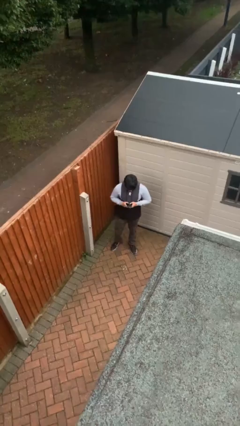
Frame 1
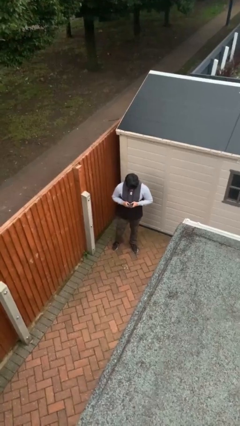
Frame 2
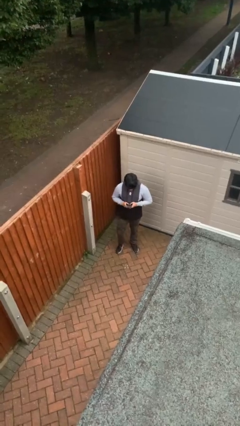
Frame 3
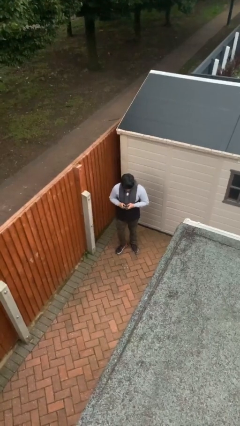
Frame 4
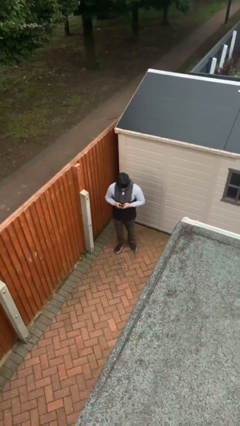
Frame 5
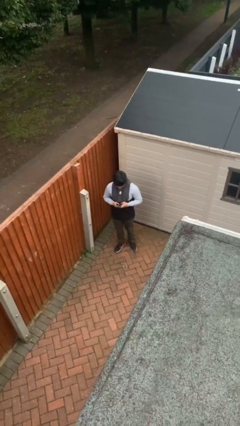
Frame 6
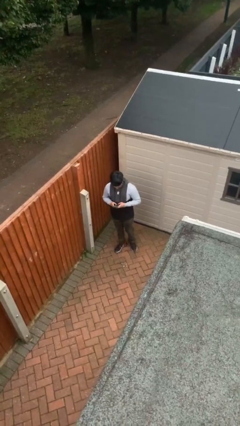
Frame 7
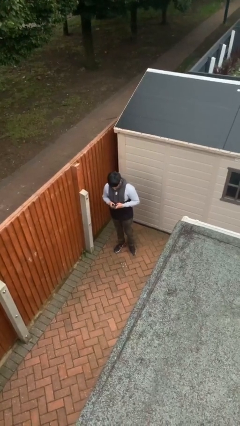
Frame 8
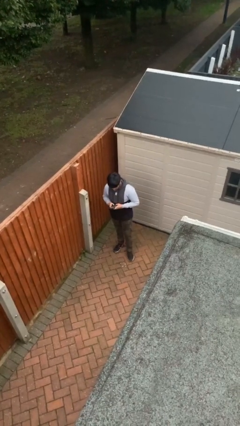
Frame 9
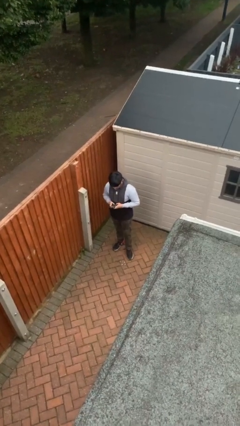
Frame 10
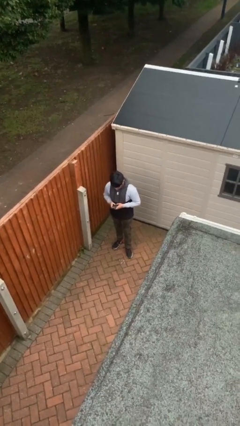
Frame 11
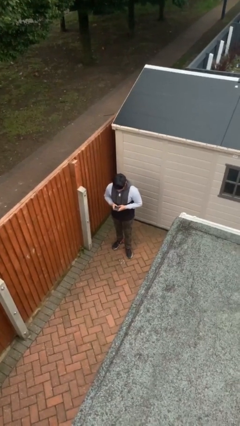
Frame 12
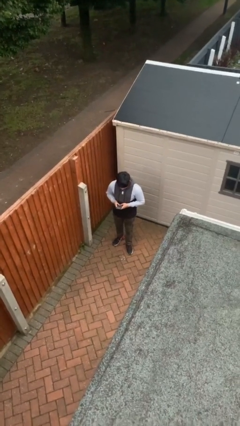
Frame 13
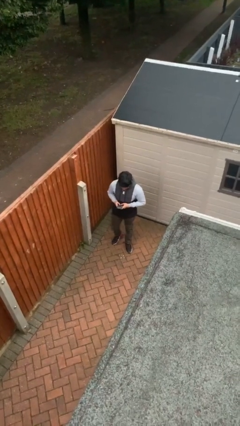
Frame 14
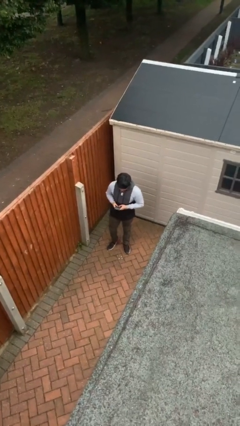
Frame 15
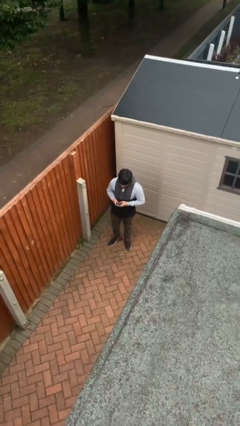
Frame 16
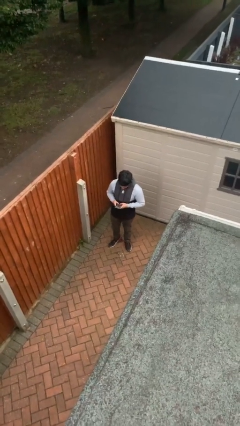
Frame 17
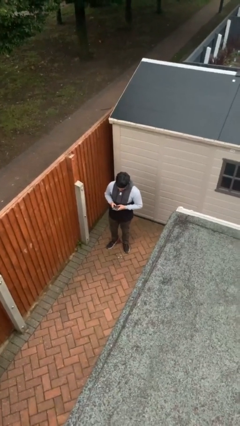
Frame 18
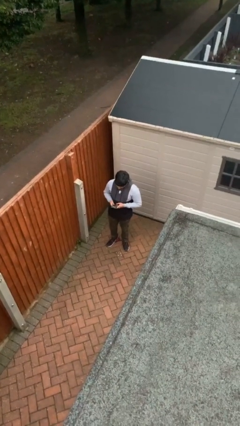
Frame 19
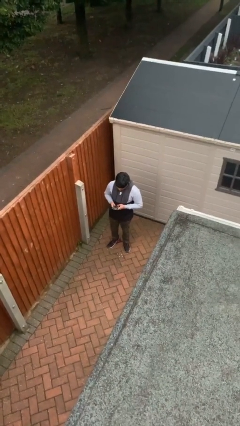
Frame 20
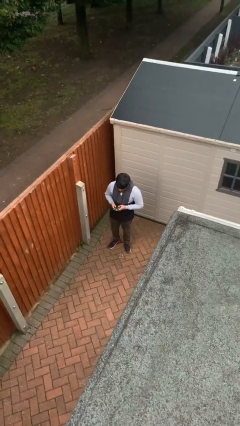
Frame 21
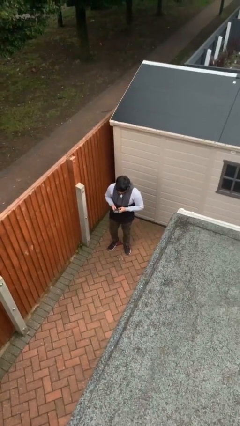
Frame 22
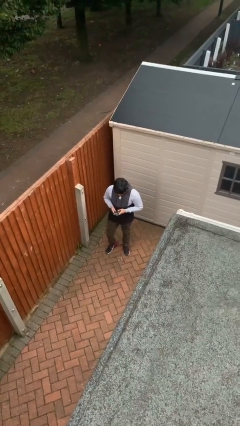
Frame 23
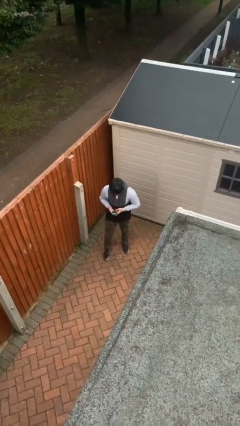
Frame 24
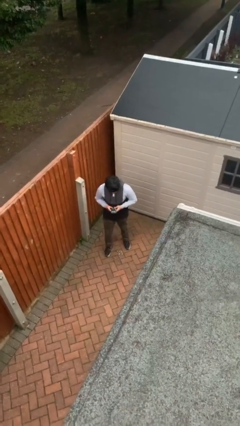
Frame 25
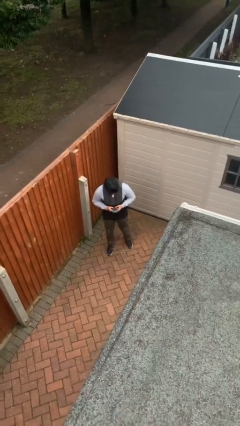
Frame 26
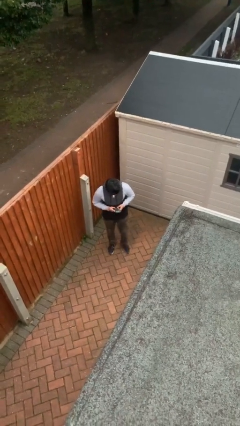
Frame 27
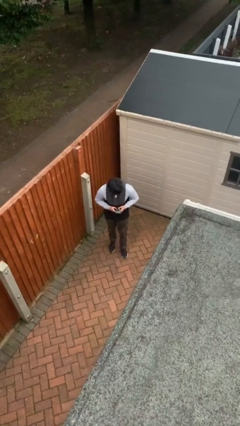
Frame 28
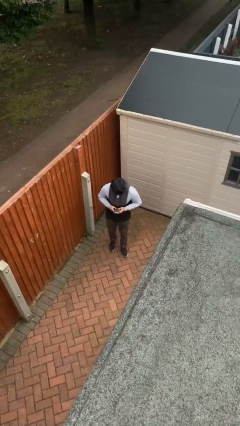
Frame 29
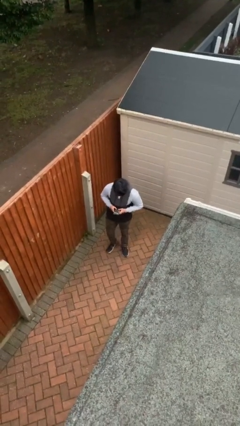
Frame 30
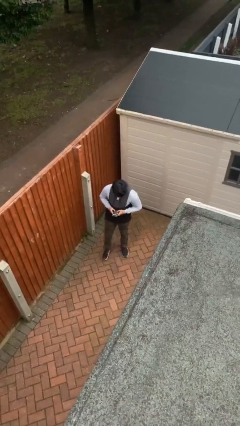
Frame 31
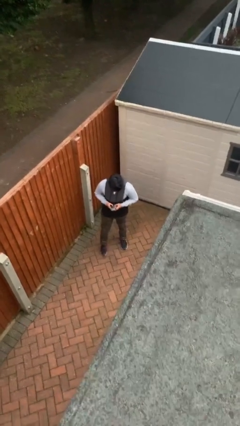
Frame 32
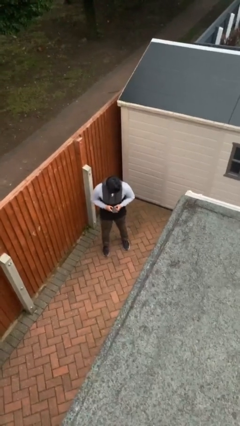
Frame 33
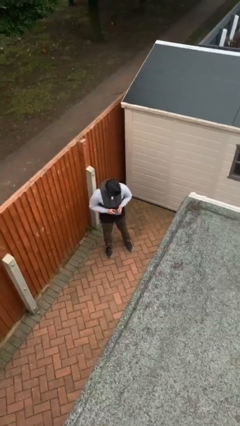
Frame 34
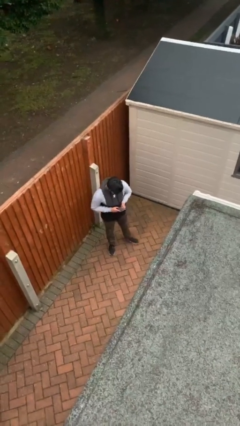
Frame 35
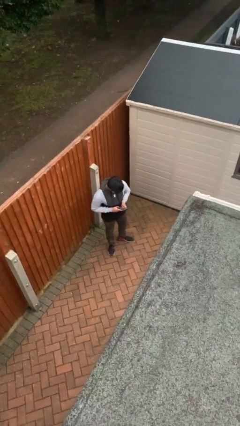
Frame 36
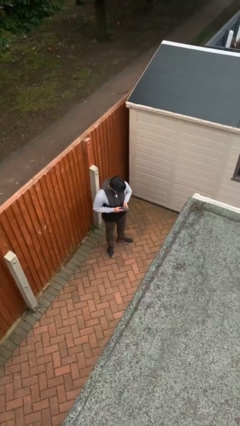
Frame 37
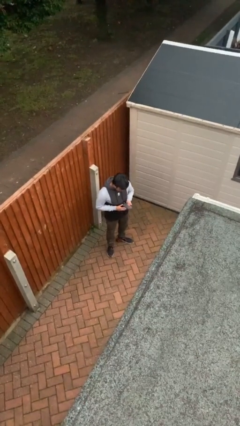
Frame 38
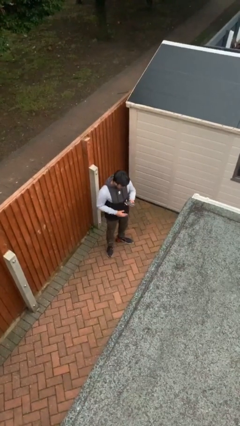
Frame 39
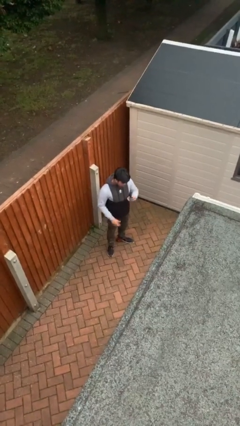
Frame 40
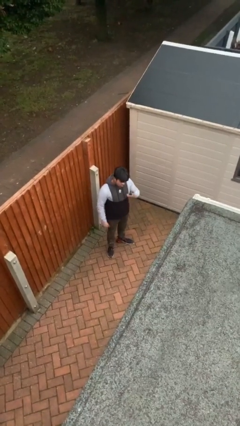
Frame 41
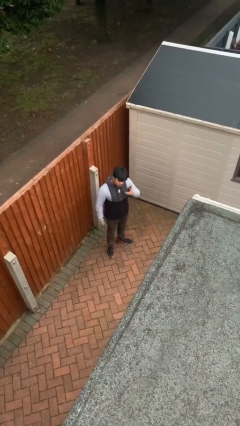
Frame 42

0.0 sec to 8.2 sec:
person texts on phone

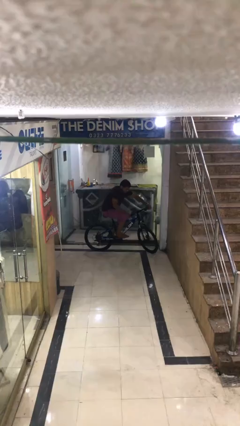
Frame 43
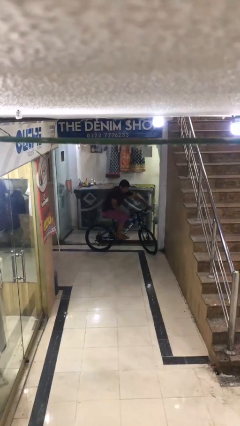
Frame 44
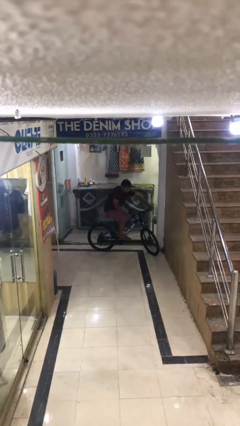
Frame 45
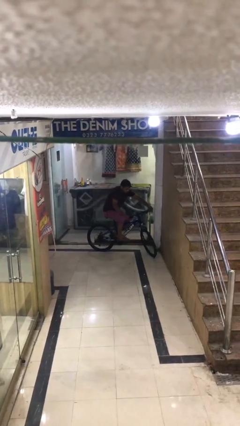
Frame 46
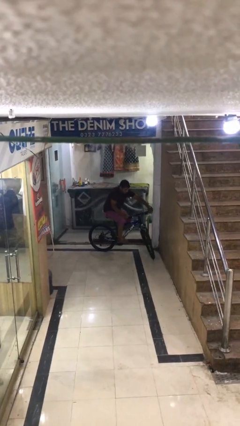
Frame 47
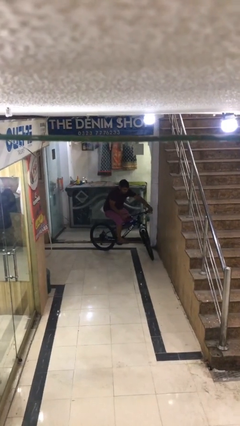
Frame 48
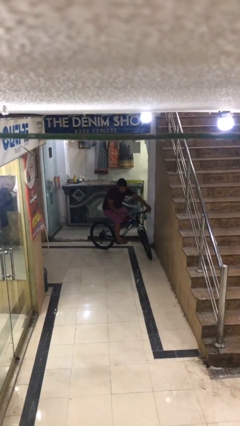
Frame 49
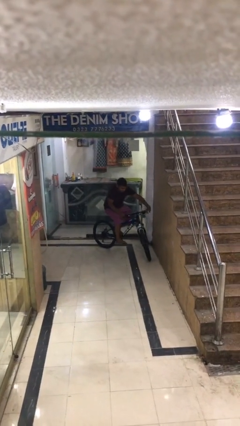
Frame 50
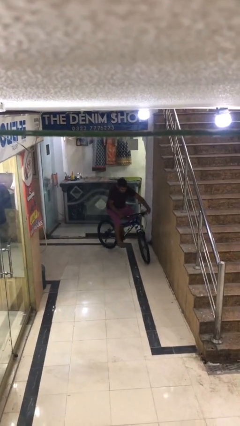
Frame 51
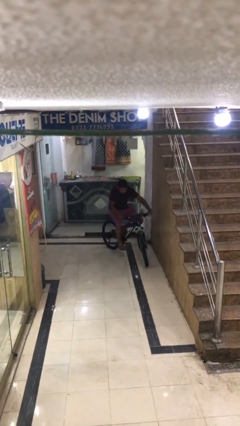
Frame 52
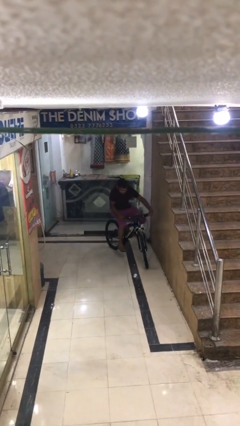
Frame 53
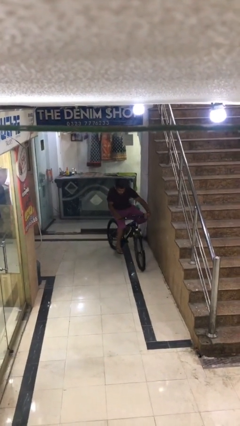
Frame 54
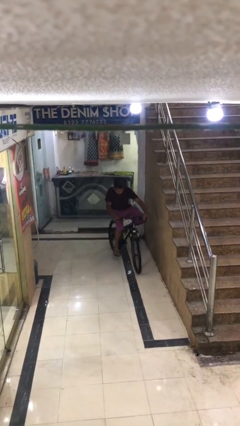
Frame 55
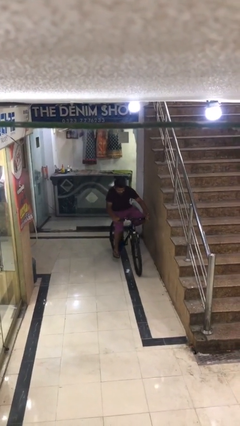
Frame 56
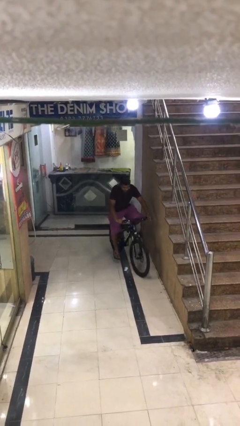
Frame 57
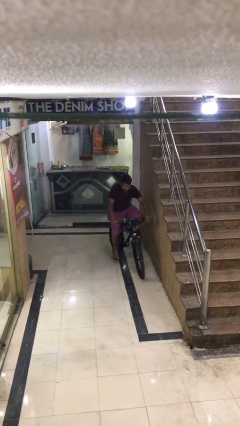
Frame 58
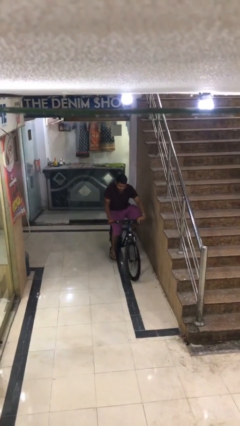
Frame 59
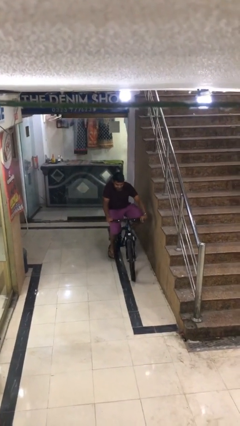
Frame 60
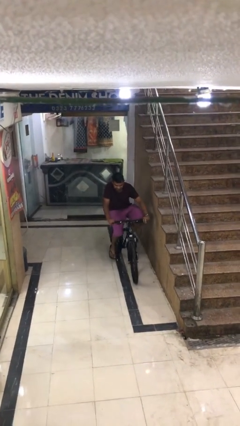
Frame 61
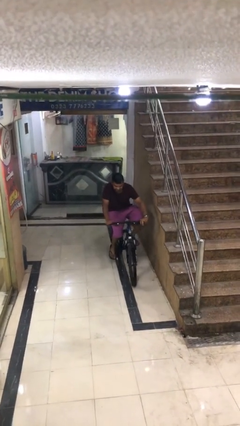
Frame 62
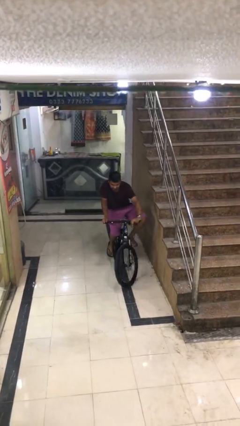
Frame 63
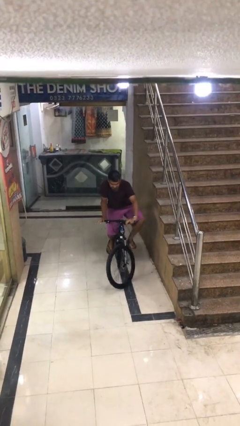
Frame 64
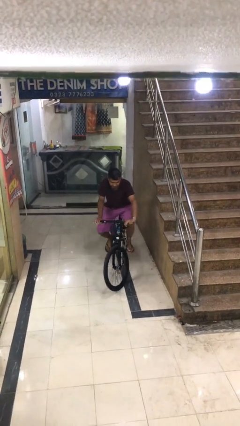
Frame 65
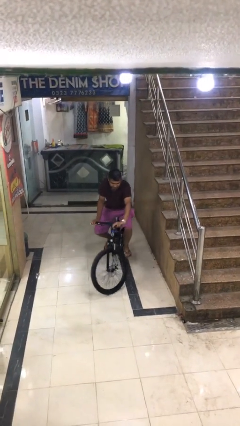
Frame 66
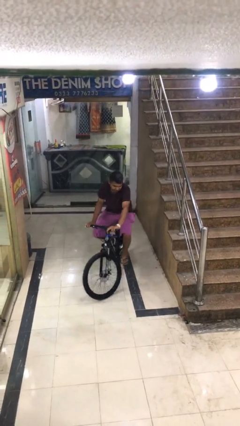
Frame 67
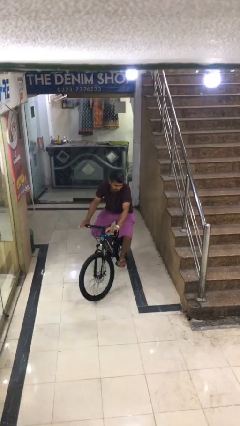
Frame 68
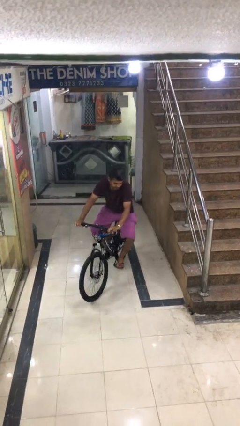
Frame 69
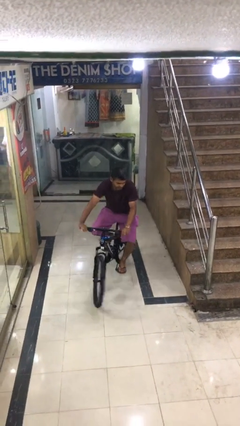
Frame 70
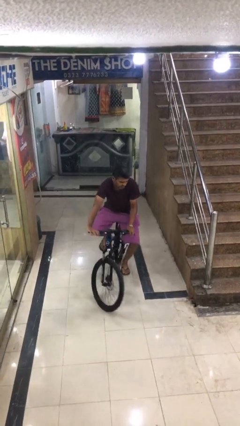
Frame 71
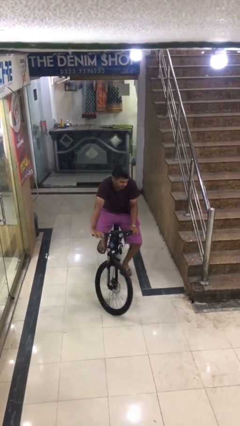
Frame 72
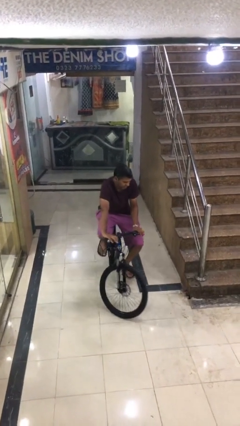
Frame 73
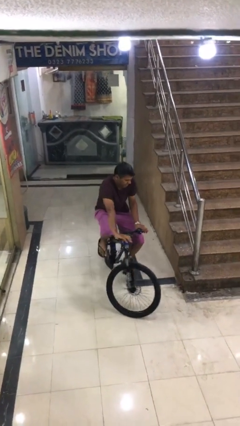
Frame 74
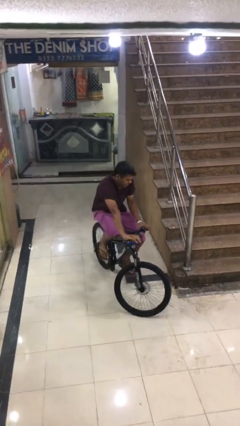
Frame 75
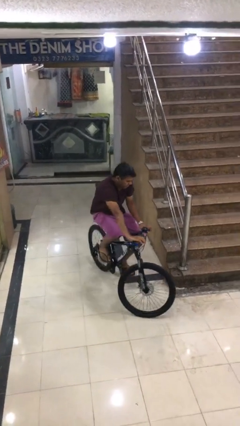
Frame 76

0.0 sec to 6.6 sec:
person rides bicycle

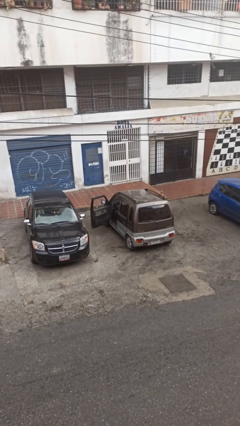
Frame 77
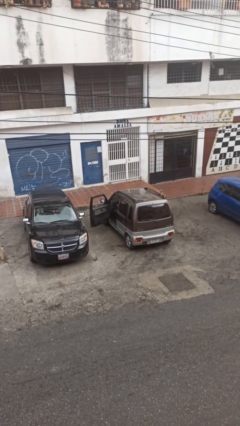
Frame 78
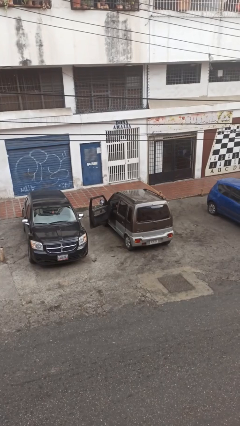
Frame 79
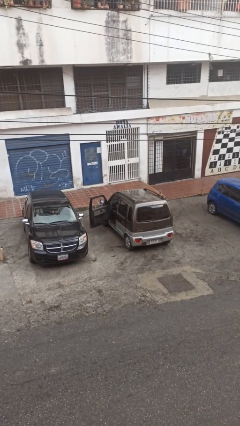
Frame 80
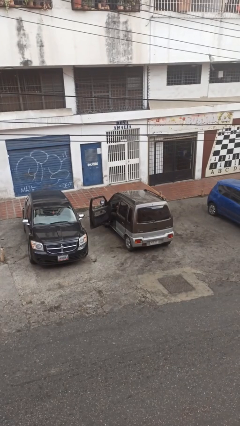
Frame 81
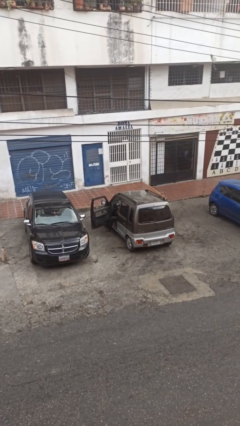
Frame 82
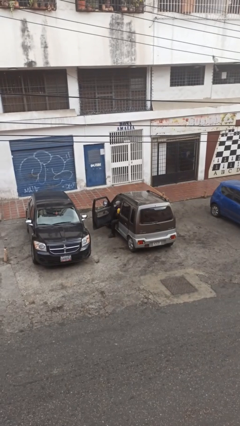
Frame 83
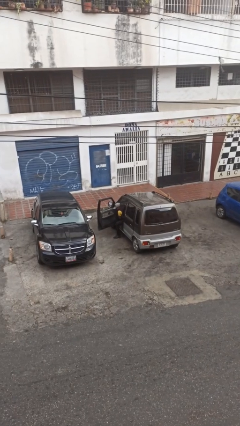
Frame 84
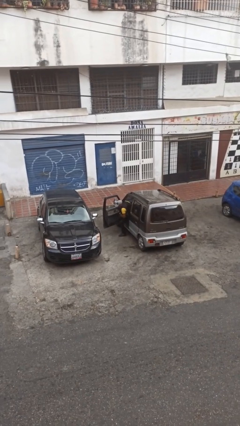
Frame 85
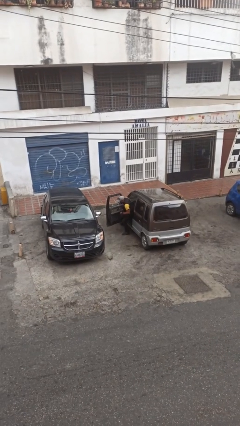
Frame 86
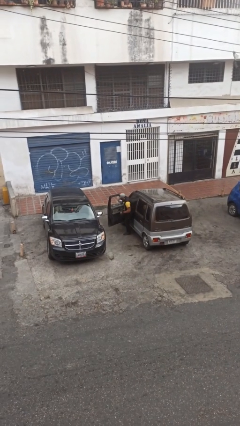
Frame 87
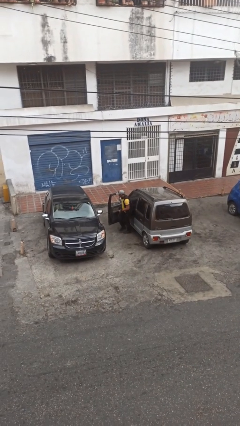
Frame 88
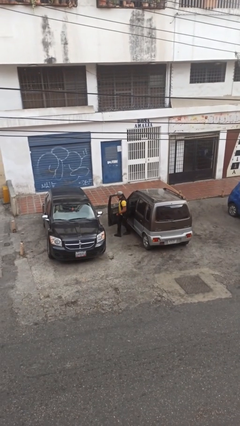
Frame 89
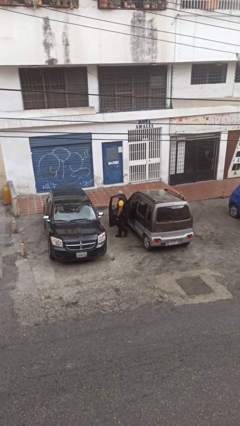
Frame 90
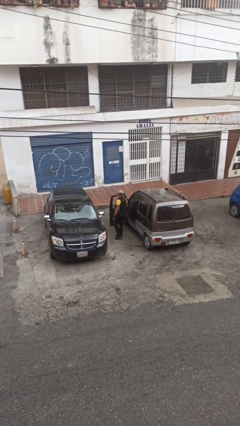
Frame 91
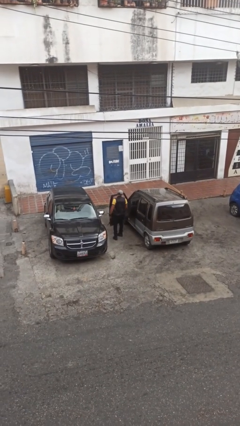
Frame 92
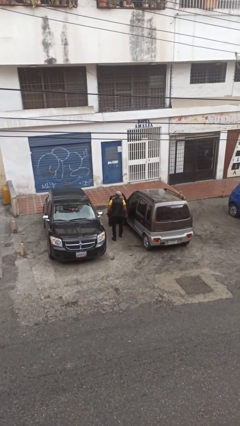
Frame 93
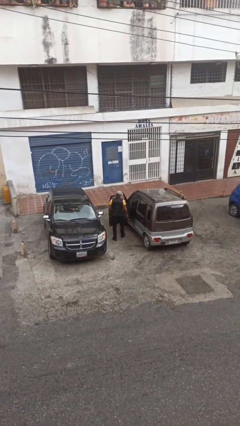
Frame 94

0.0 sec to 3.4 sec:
person exits car
